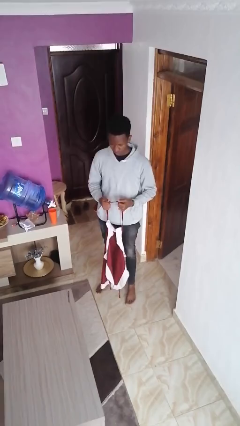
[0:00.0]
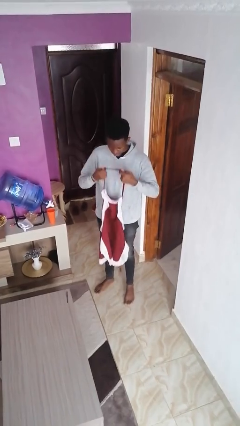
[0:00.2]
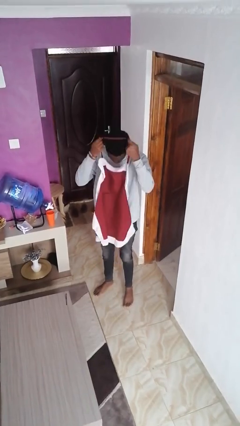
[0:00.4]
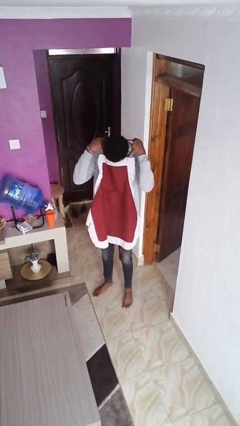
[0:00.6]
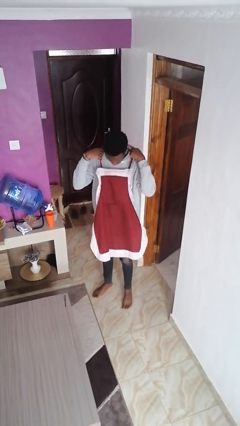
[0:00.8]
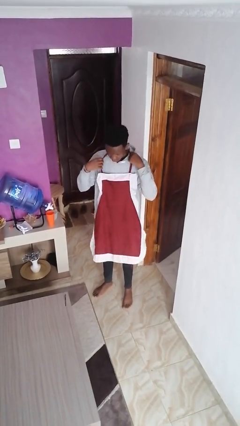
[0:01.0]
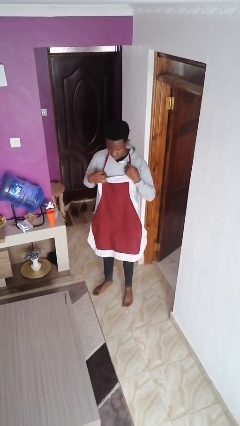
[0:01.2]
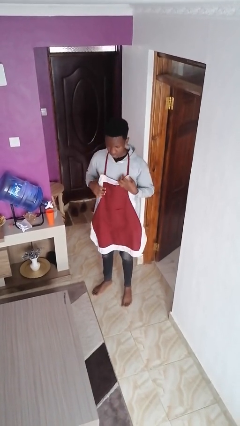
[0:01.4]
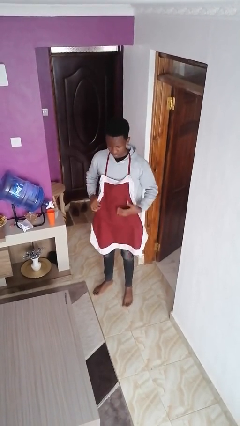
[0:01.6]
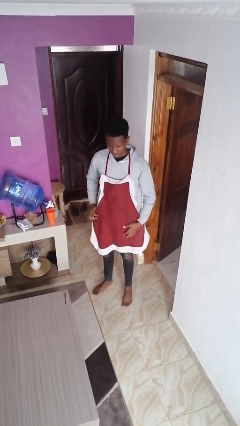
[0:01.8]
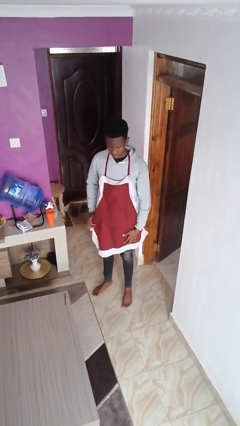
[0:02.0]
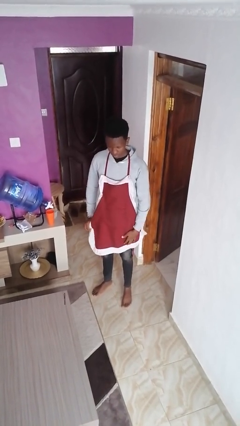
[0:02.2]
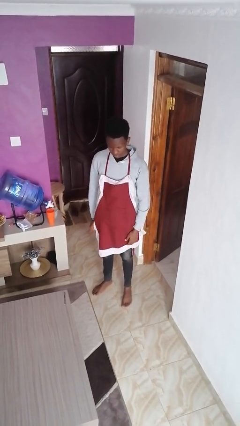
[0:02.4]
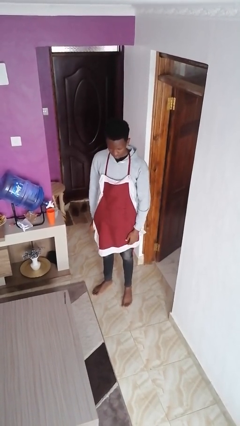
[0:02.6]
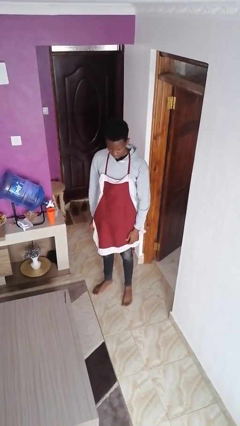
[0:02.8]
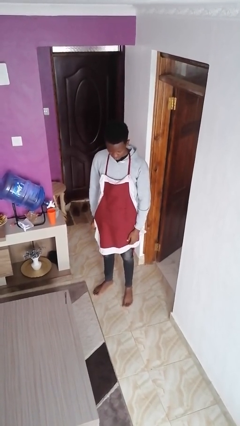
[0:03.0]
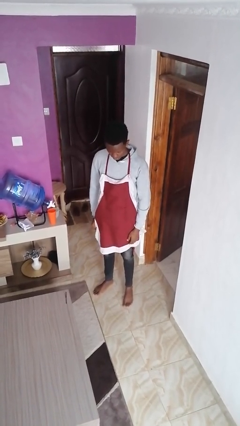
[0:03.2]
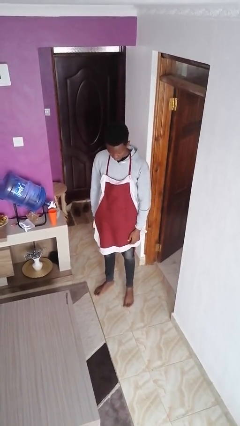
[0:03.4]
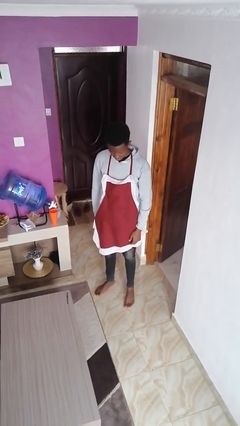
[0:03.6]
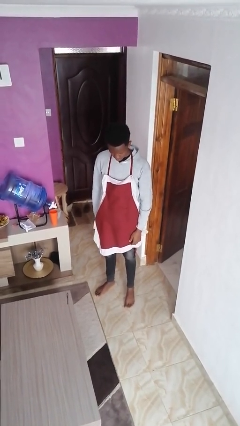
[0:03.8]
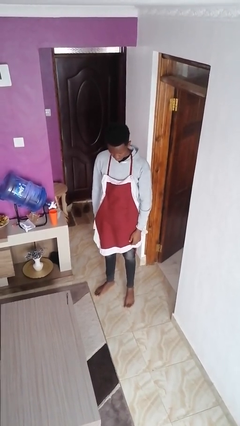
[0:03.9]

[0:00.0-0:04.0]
person puts on apron

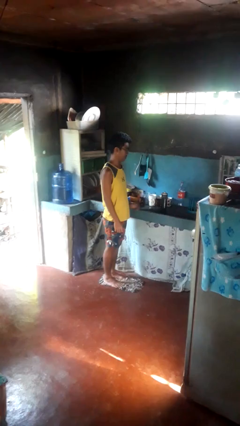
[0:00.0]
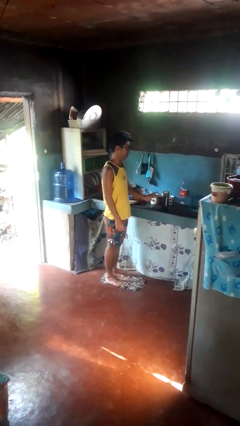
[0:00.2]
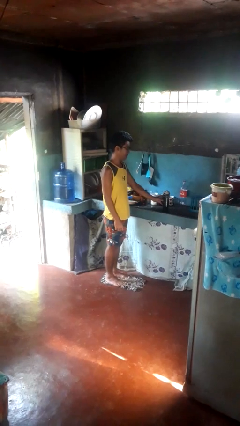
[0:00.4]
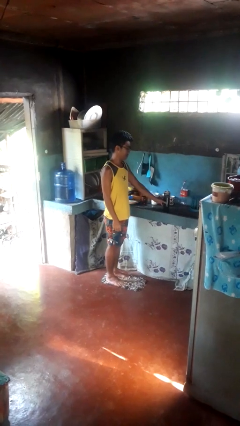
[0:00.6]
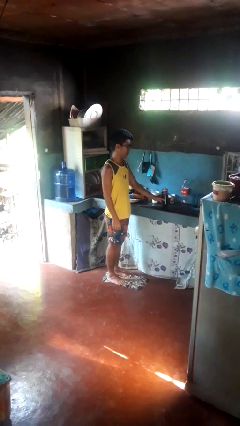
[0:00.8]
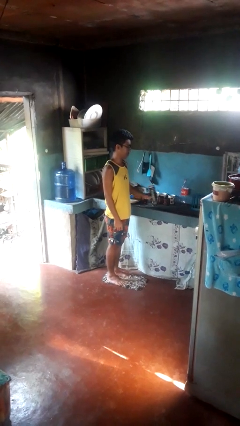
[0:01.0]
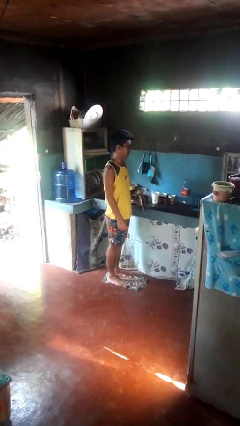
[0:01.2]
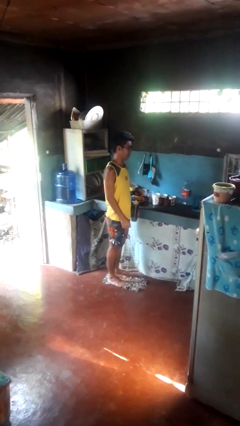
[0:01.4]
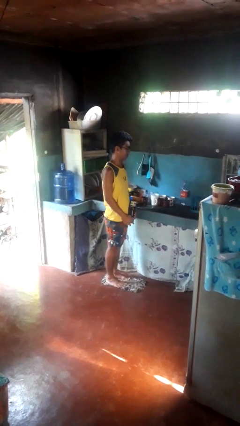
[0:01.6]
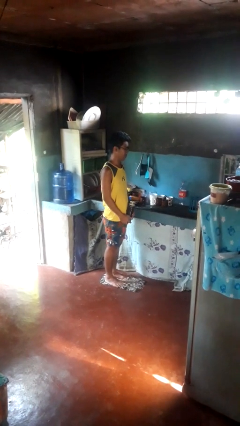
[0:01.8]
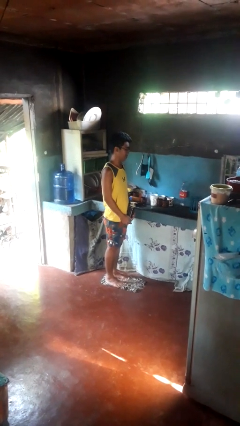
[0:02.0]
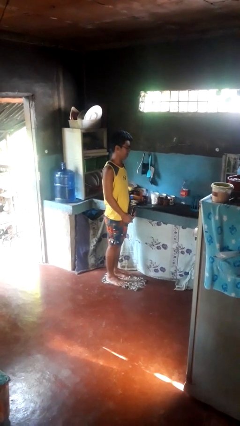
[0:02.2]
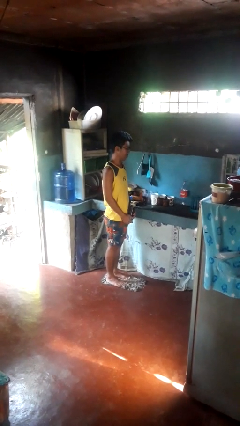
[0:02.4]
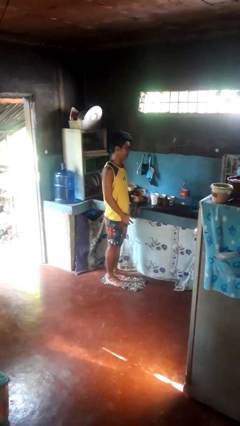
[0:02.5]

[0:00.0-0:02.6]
person picks up object from countertop

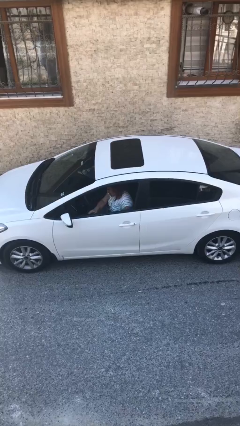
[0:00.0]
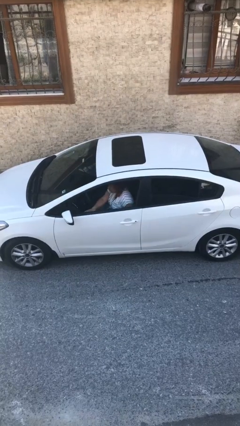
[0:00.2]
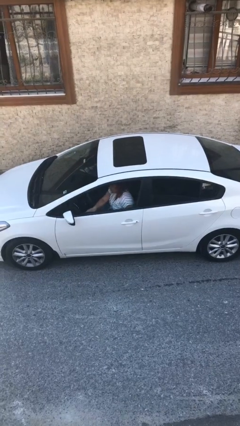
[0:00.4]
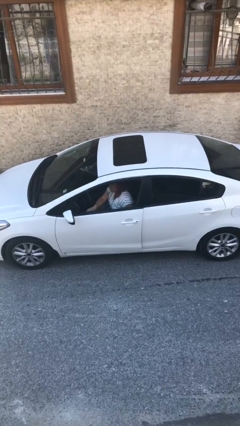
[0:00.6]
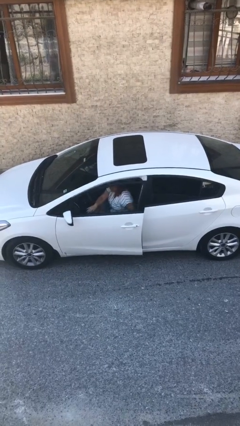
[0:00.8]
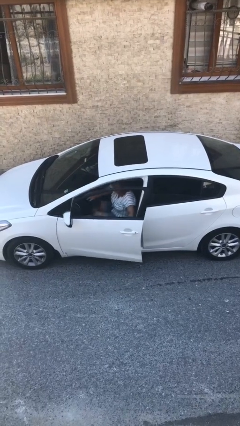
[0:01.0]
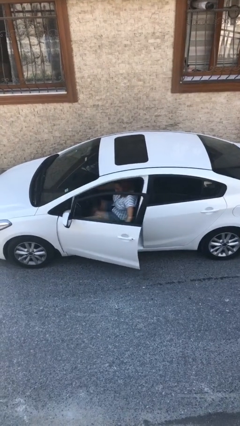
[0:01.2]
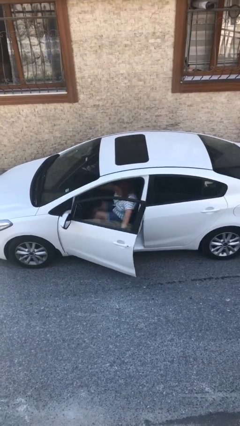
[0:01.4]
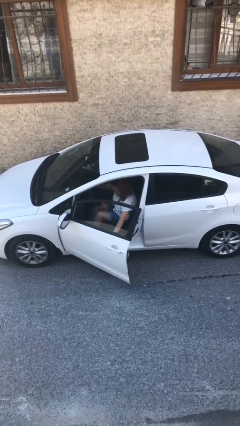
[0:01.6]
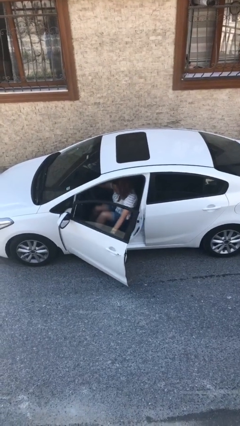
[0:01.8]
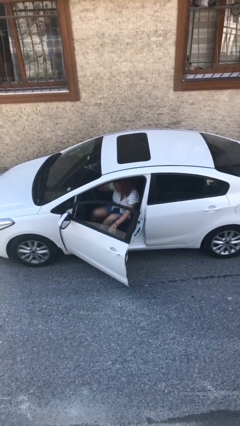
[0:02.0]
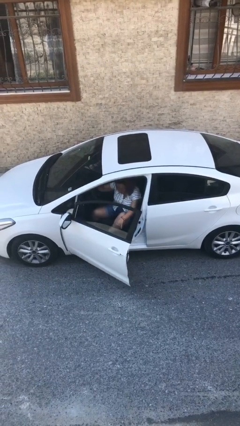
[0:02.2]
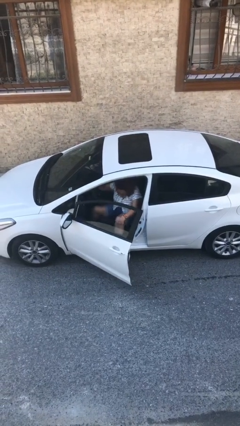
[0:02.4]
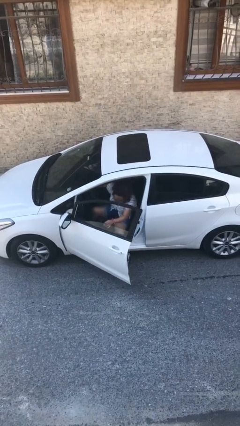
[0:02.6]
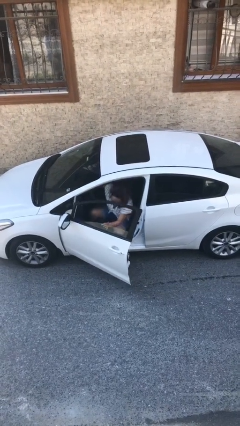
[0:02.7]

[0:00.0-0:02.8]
person opens car door

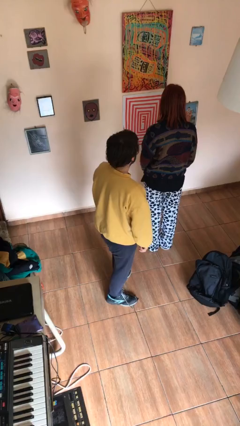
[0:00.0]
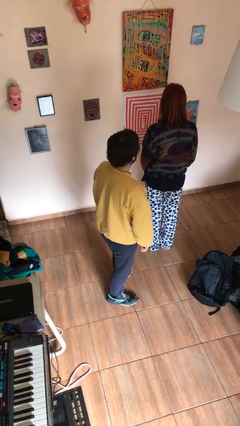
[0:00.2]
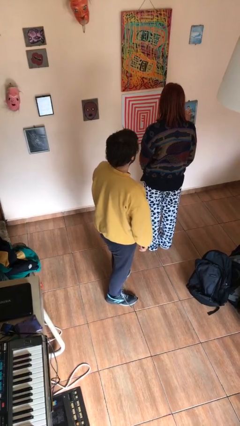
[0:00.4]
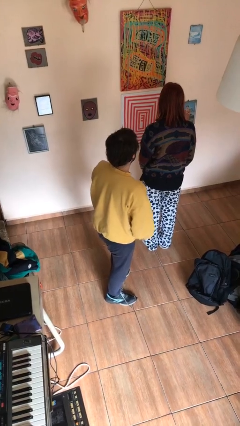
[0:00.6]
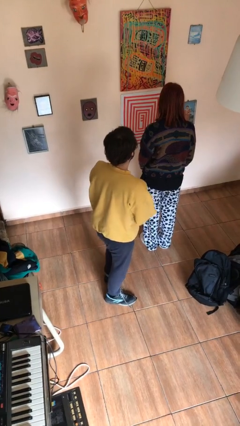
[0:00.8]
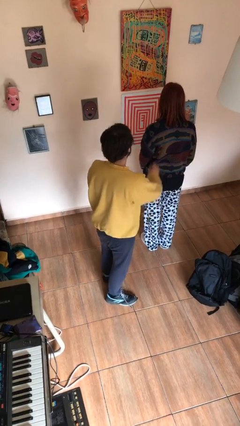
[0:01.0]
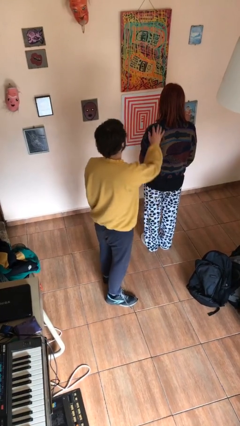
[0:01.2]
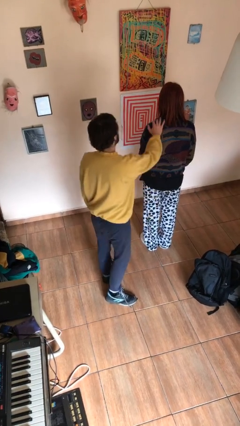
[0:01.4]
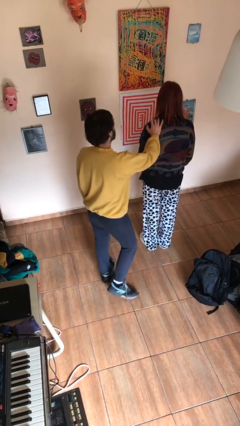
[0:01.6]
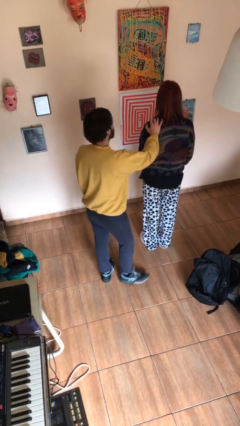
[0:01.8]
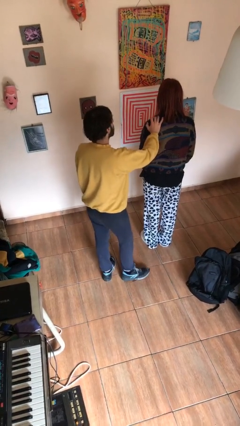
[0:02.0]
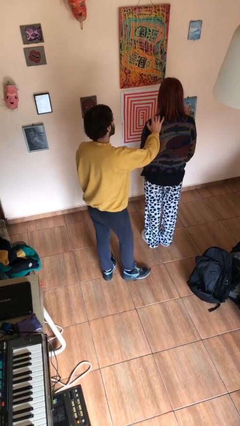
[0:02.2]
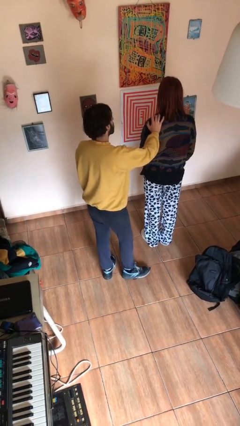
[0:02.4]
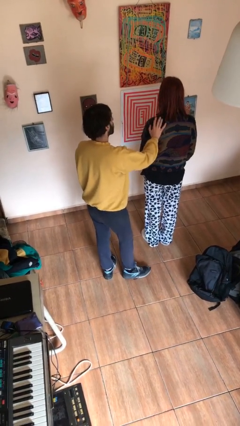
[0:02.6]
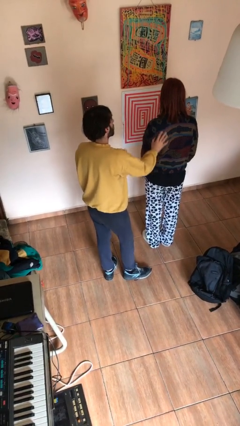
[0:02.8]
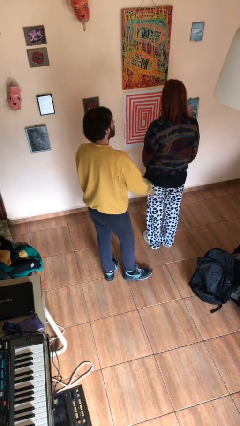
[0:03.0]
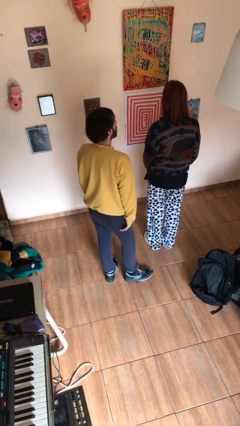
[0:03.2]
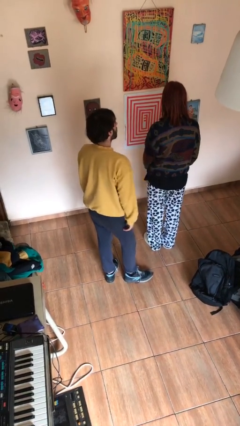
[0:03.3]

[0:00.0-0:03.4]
person touches back of person

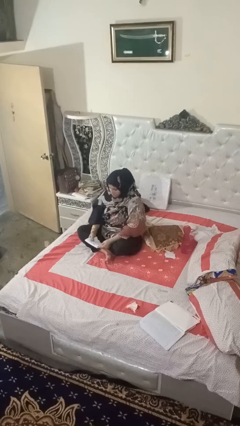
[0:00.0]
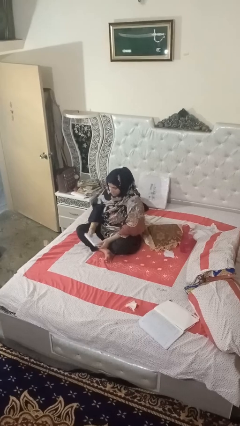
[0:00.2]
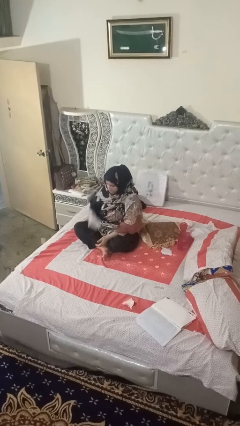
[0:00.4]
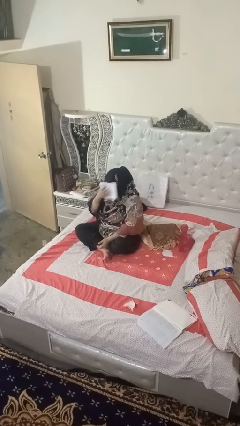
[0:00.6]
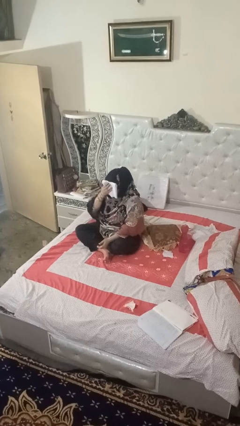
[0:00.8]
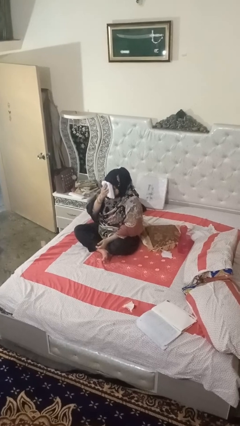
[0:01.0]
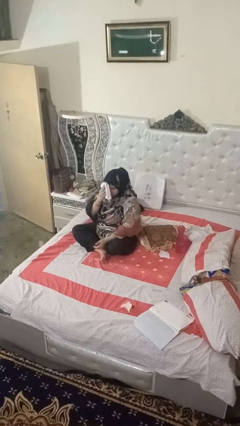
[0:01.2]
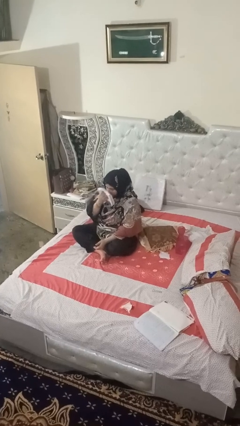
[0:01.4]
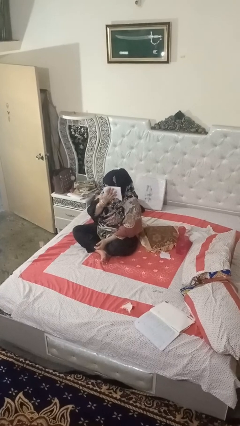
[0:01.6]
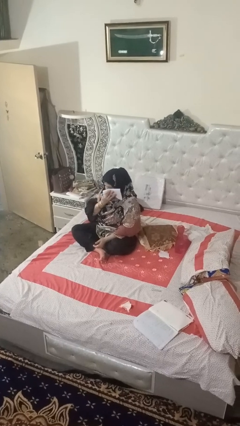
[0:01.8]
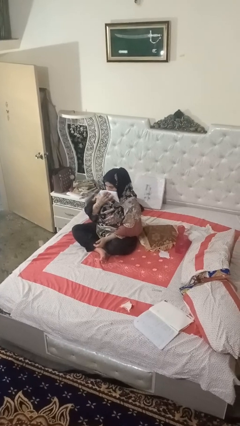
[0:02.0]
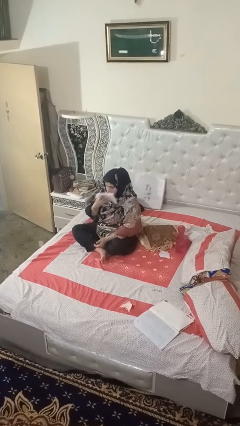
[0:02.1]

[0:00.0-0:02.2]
person wipes mouth with napkin

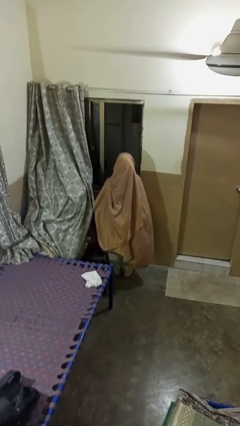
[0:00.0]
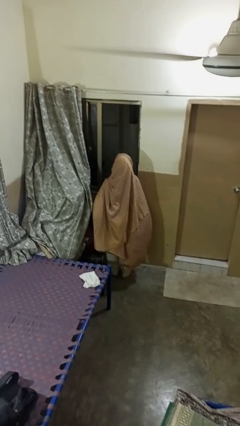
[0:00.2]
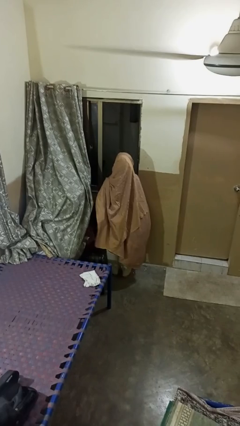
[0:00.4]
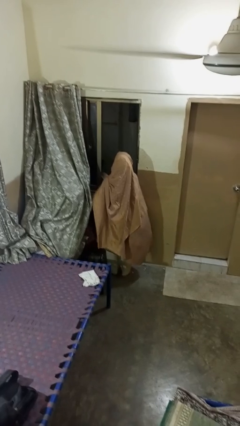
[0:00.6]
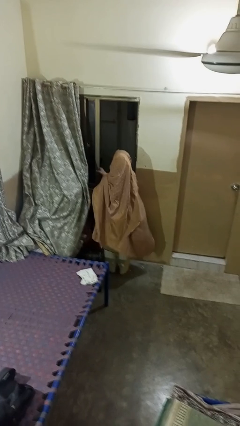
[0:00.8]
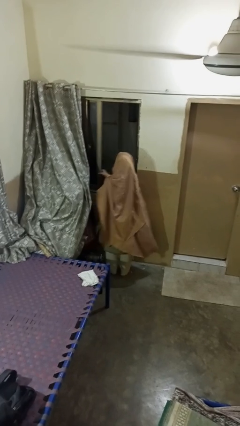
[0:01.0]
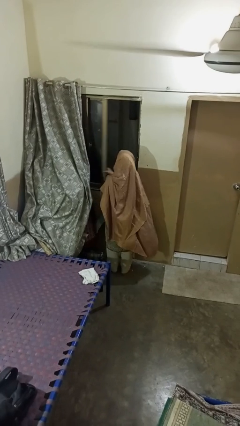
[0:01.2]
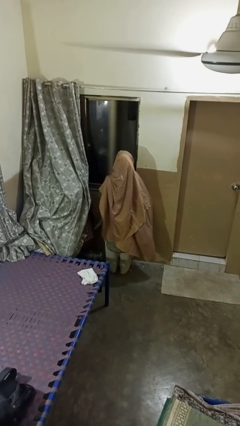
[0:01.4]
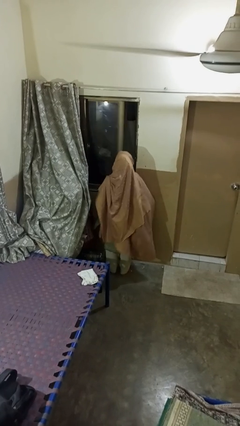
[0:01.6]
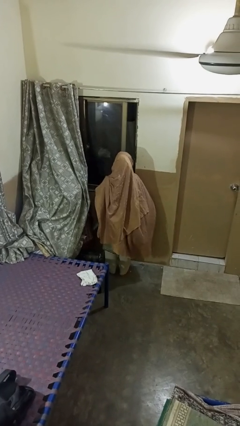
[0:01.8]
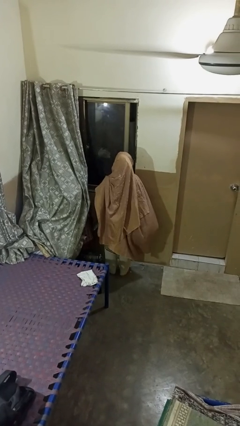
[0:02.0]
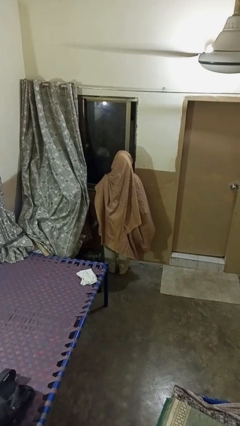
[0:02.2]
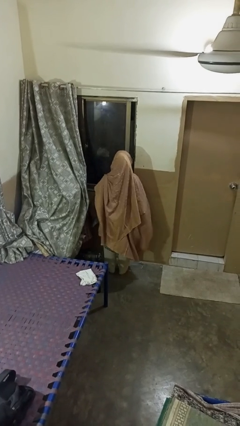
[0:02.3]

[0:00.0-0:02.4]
person closes home window

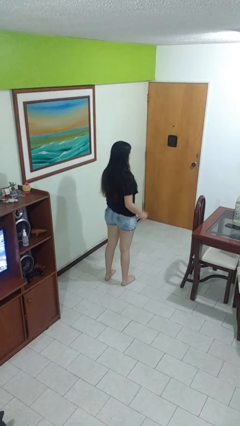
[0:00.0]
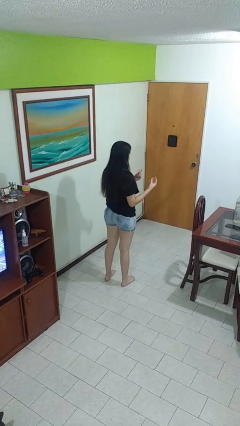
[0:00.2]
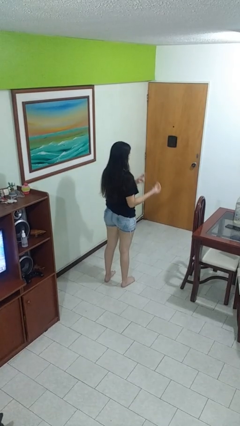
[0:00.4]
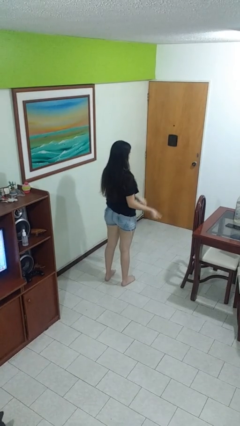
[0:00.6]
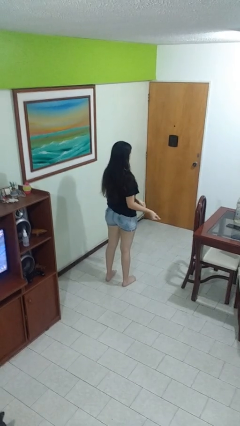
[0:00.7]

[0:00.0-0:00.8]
person snaps fingers
